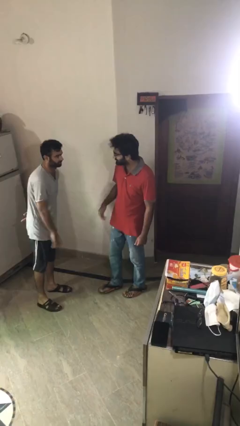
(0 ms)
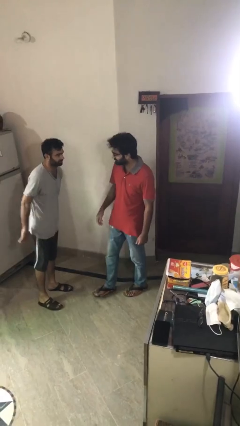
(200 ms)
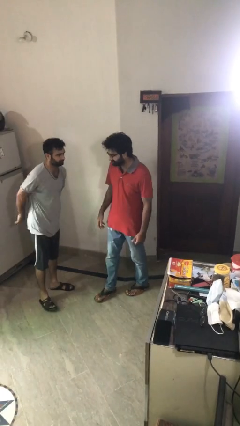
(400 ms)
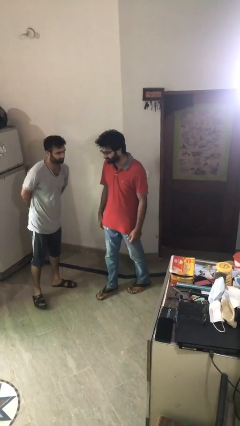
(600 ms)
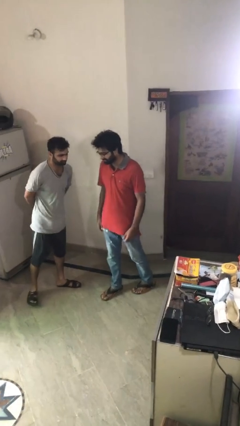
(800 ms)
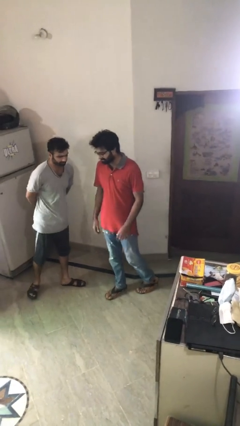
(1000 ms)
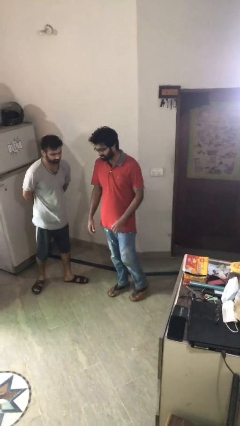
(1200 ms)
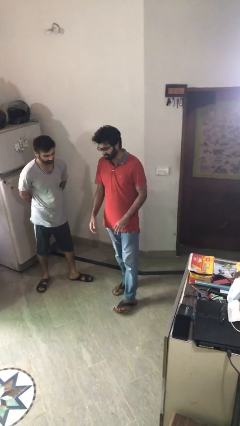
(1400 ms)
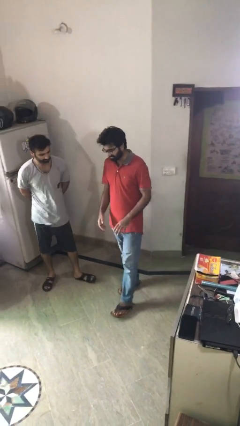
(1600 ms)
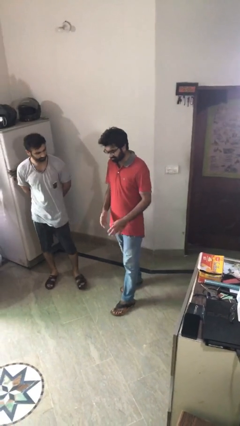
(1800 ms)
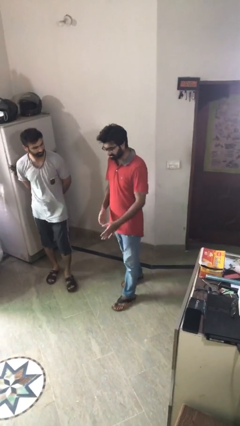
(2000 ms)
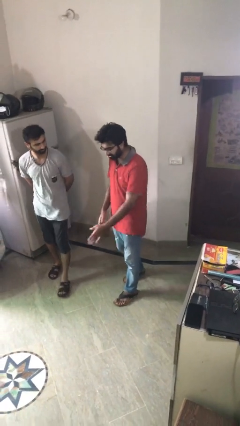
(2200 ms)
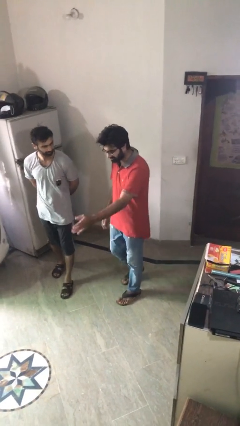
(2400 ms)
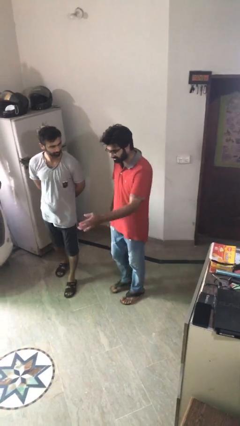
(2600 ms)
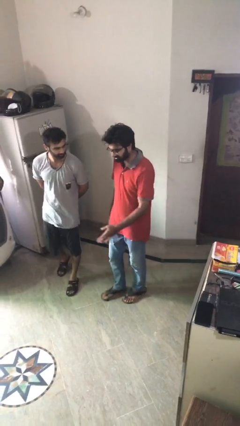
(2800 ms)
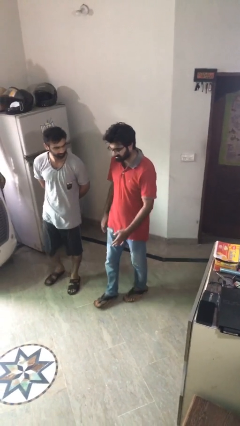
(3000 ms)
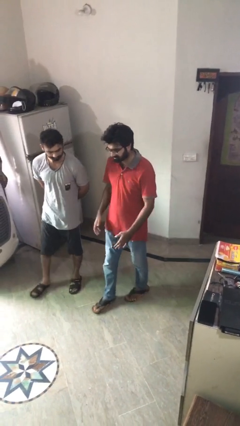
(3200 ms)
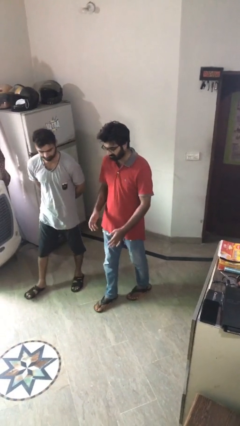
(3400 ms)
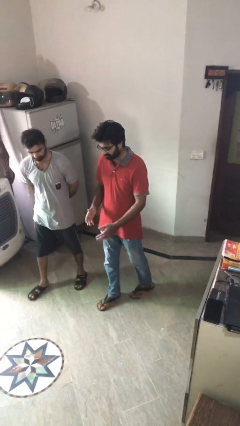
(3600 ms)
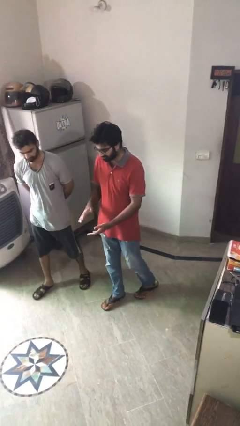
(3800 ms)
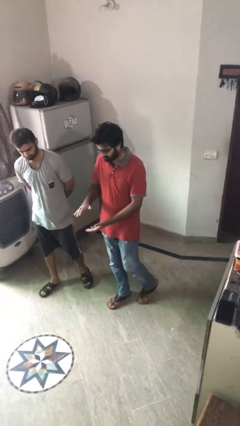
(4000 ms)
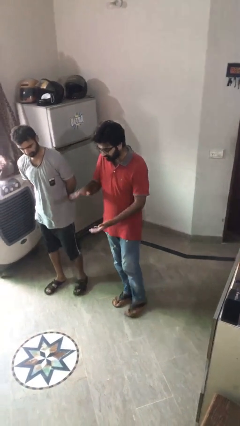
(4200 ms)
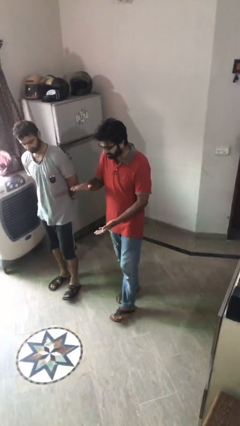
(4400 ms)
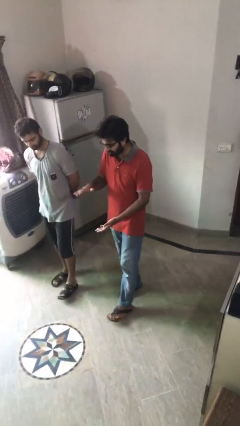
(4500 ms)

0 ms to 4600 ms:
person talks to person

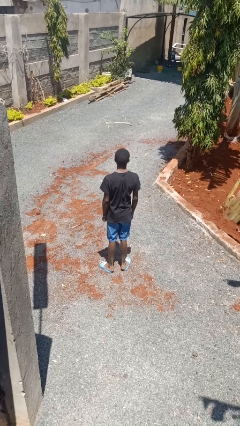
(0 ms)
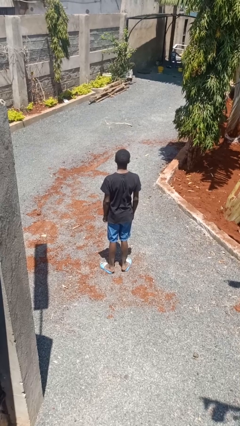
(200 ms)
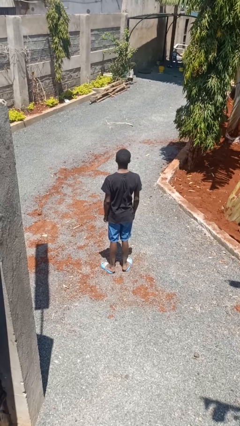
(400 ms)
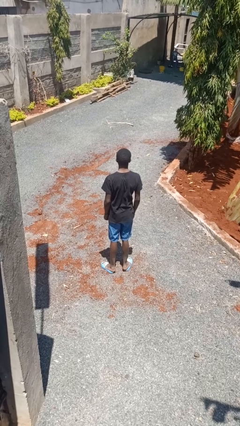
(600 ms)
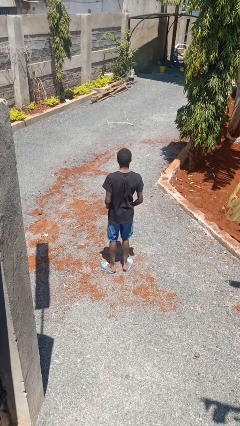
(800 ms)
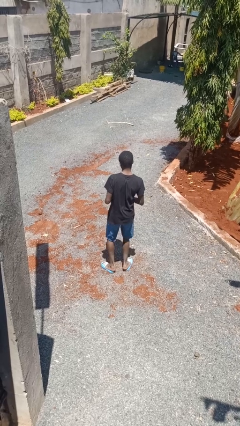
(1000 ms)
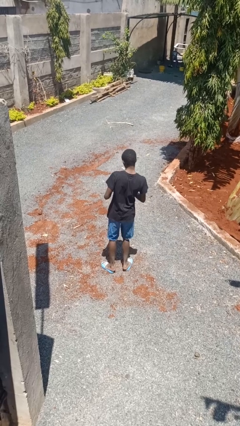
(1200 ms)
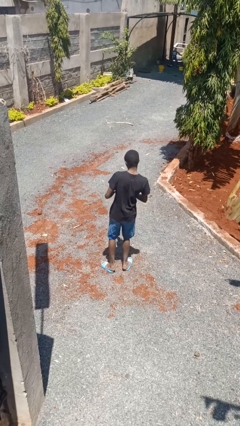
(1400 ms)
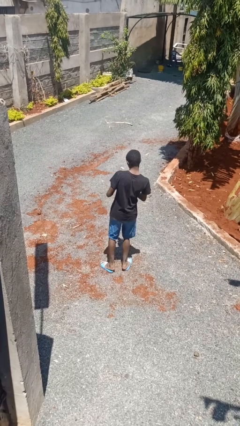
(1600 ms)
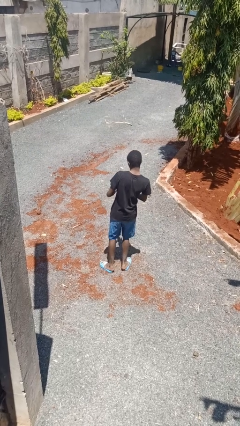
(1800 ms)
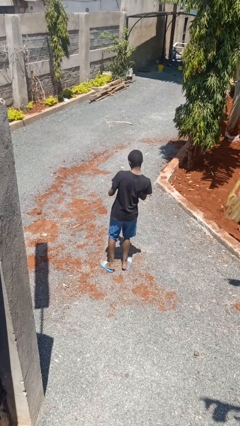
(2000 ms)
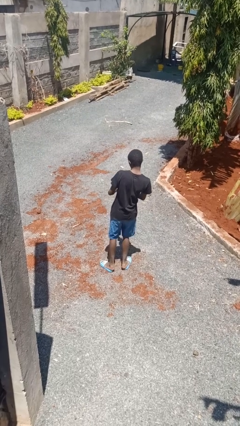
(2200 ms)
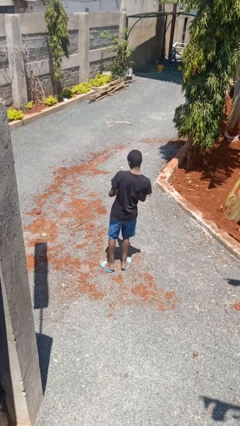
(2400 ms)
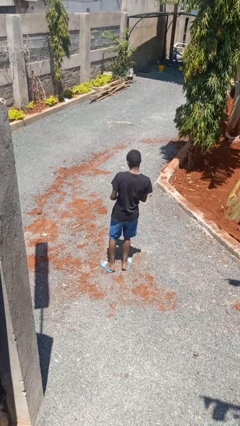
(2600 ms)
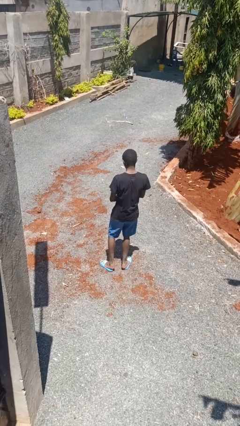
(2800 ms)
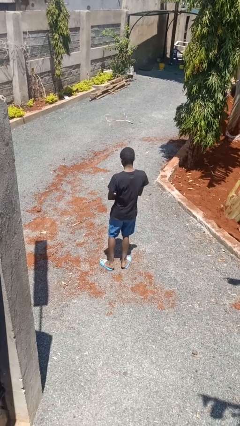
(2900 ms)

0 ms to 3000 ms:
person dances in place

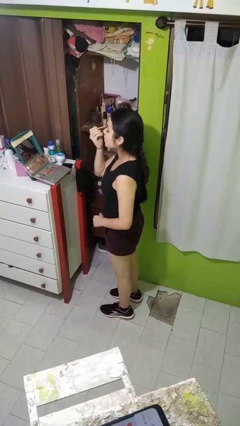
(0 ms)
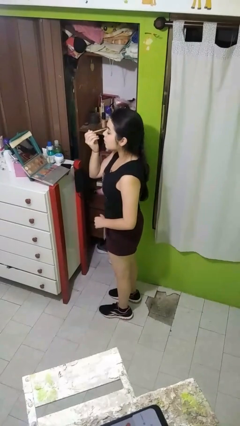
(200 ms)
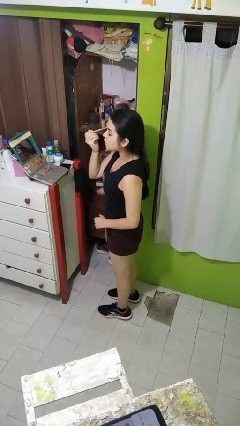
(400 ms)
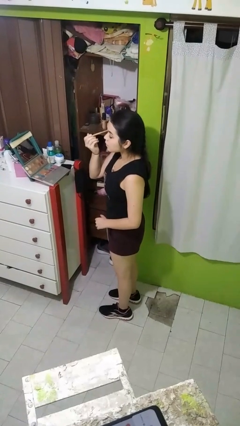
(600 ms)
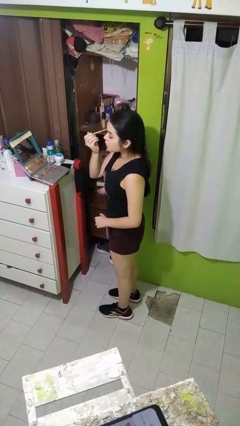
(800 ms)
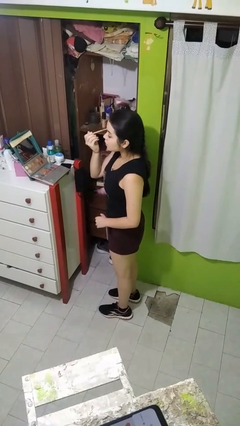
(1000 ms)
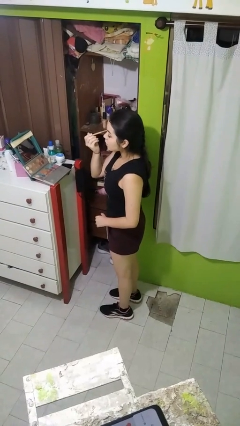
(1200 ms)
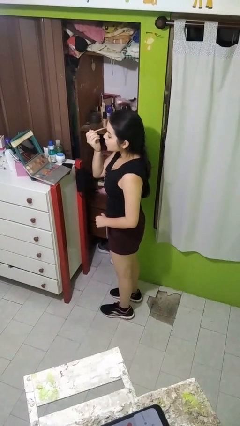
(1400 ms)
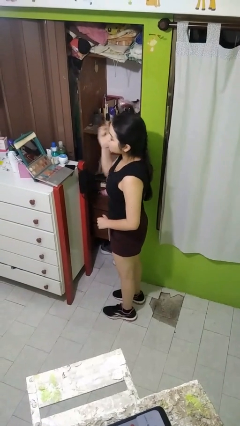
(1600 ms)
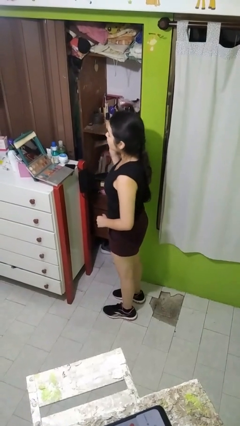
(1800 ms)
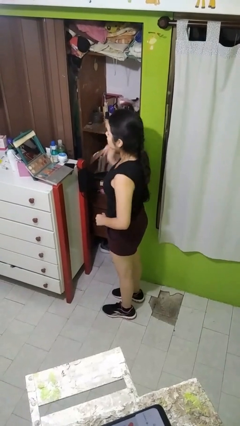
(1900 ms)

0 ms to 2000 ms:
person applies eye makeup

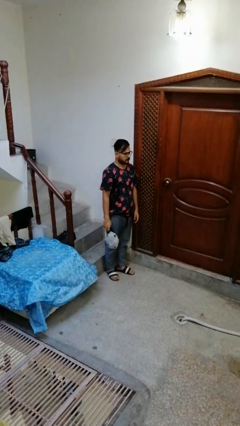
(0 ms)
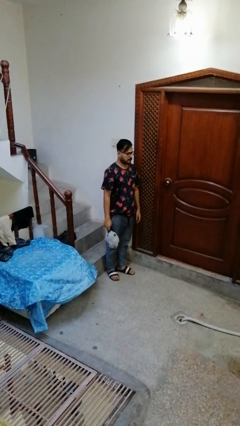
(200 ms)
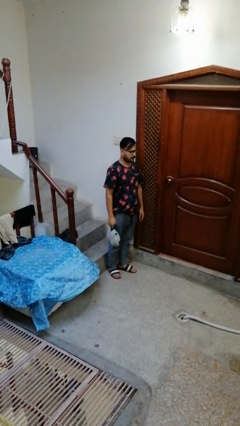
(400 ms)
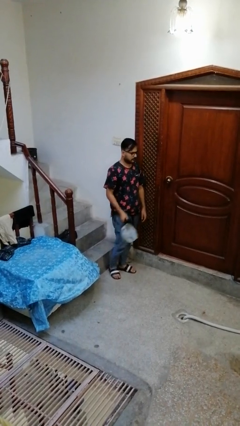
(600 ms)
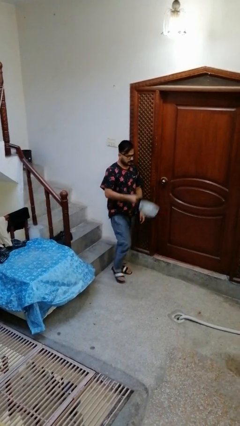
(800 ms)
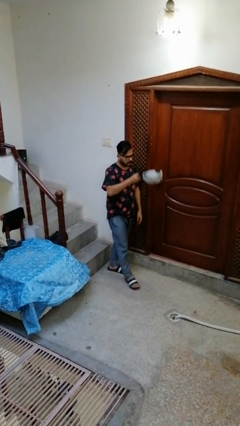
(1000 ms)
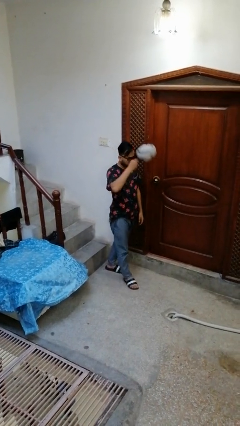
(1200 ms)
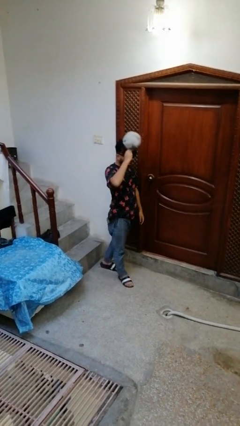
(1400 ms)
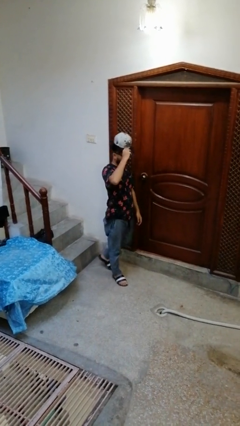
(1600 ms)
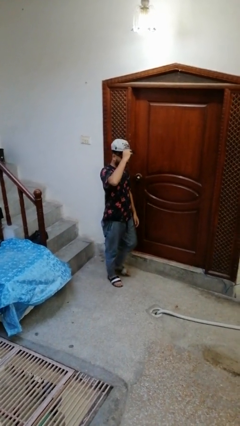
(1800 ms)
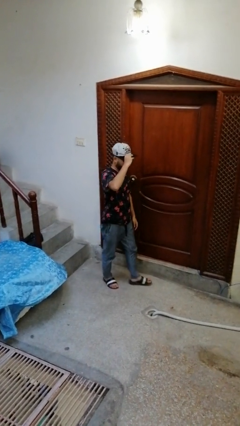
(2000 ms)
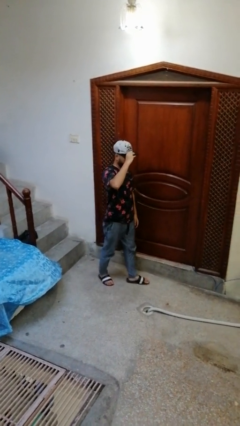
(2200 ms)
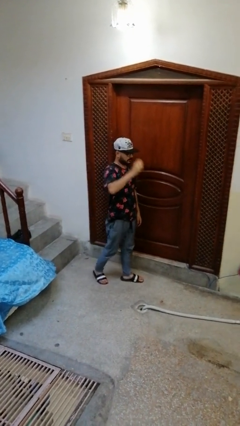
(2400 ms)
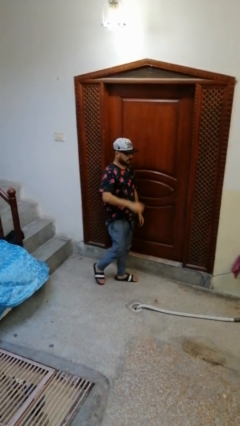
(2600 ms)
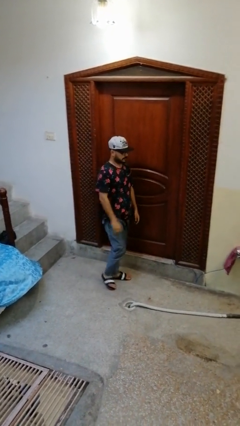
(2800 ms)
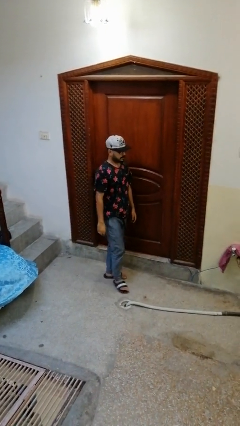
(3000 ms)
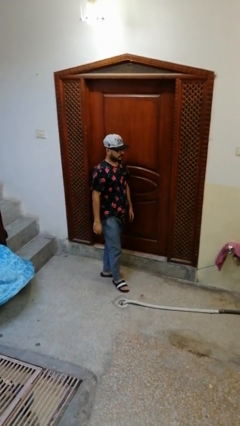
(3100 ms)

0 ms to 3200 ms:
person puts on hat

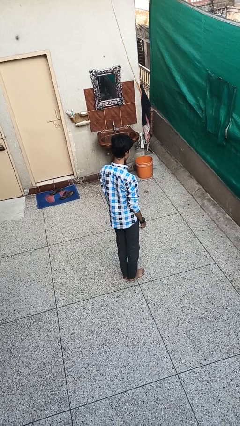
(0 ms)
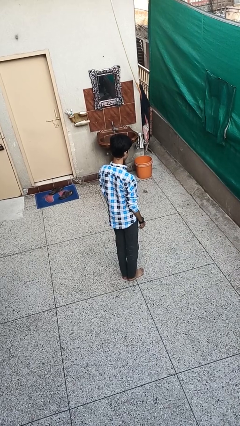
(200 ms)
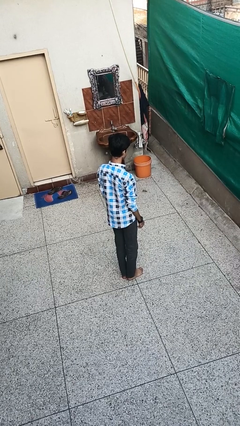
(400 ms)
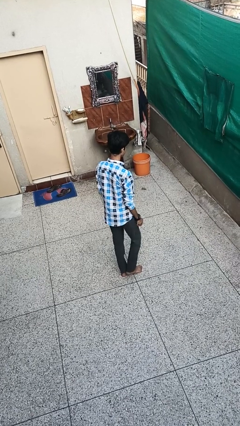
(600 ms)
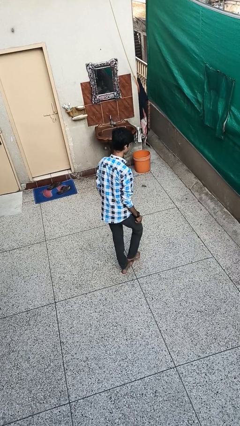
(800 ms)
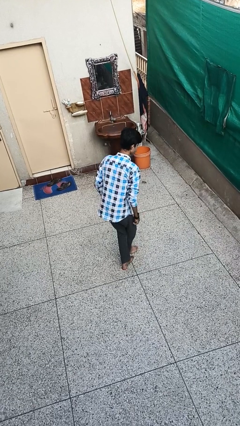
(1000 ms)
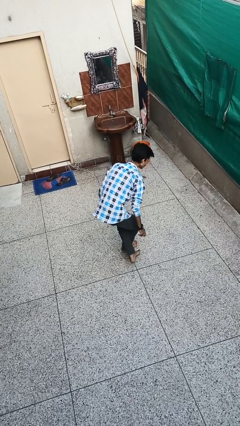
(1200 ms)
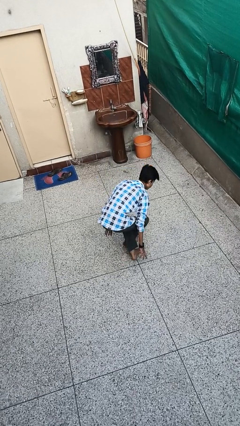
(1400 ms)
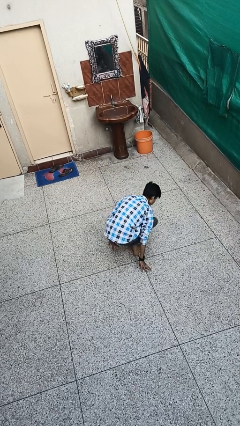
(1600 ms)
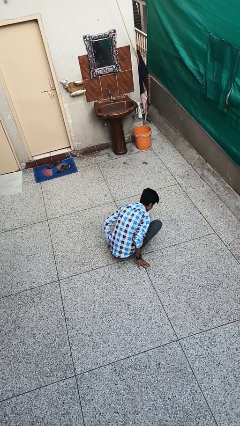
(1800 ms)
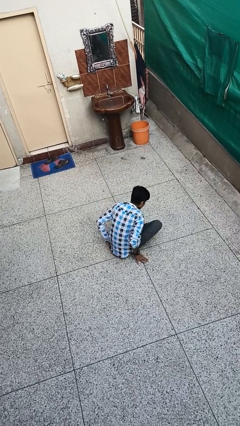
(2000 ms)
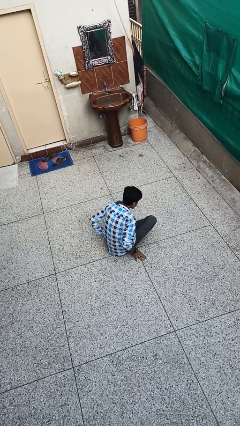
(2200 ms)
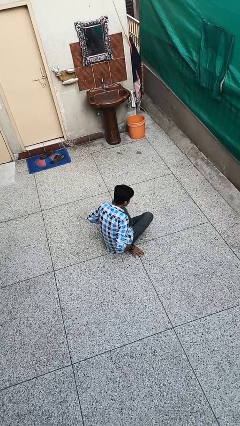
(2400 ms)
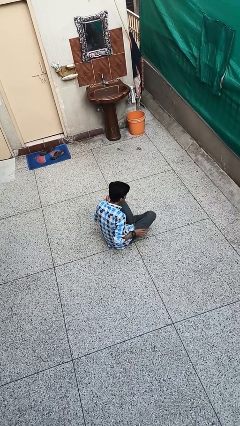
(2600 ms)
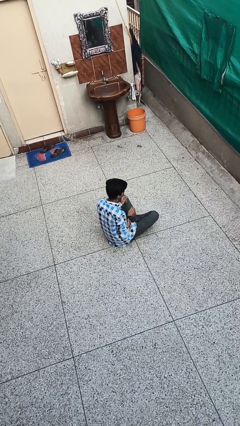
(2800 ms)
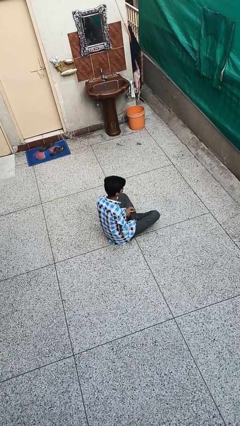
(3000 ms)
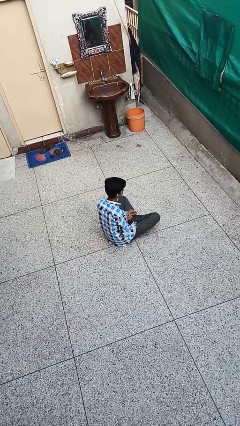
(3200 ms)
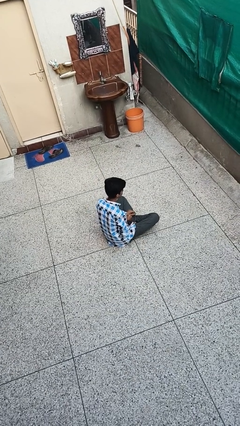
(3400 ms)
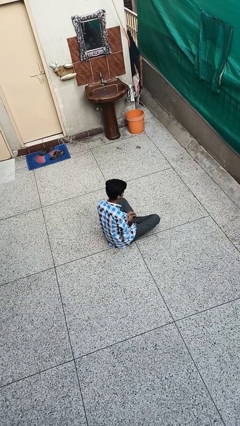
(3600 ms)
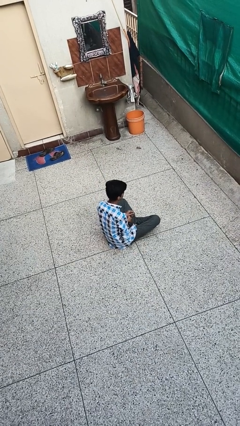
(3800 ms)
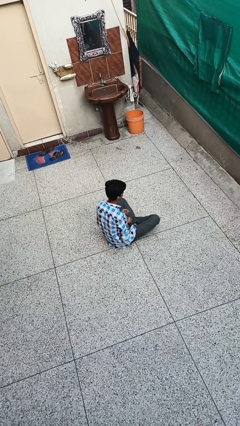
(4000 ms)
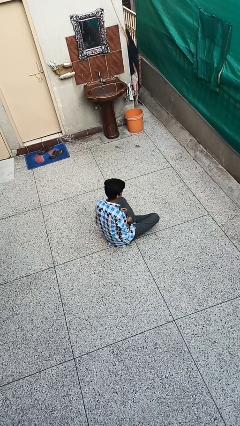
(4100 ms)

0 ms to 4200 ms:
person sits crisscross

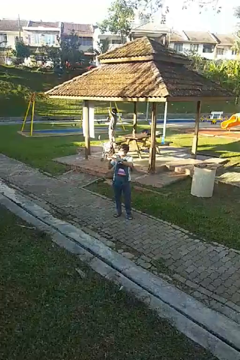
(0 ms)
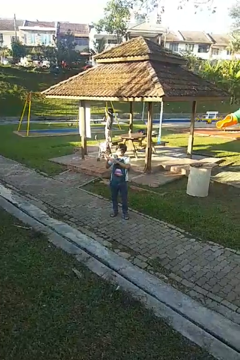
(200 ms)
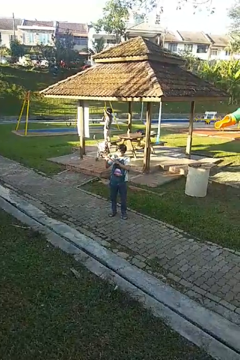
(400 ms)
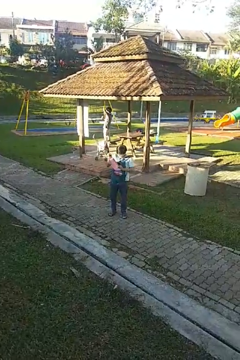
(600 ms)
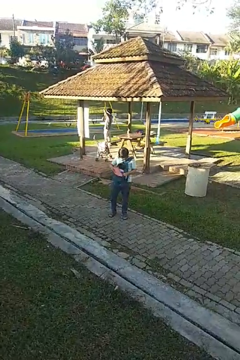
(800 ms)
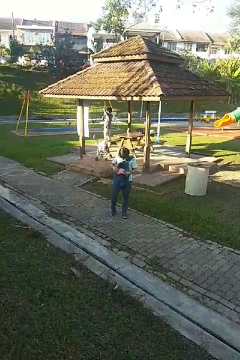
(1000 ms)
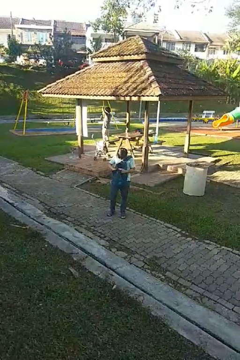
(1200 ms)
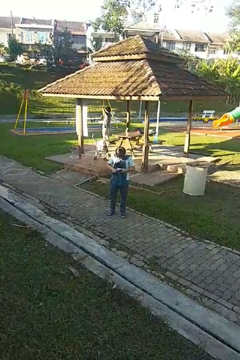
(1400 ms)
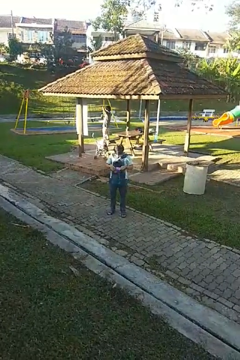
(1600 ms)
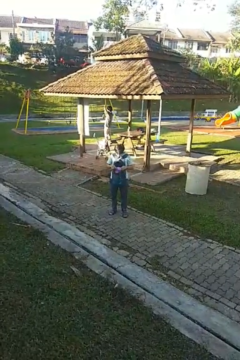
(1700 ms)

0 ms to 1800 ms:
person puts object into backpack
